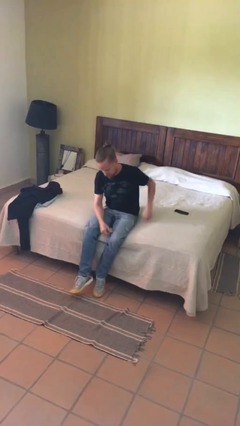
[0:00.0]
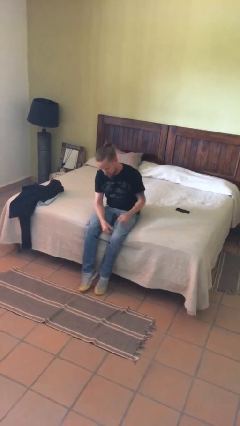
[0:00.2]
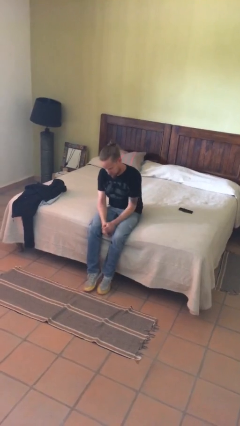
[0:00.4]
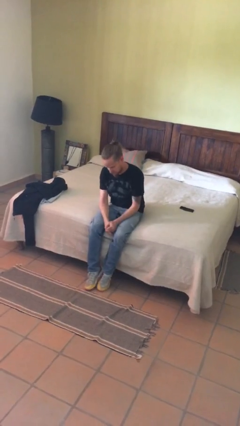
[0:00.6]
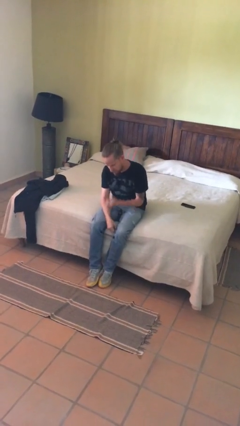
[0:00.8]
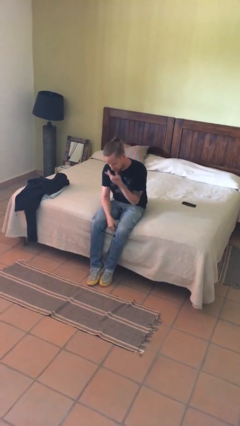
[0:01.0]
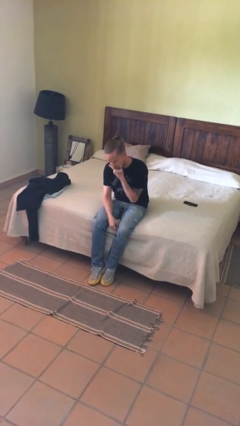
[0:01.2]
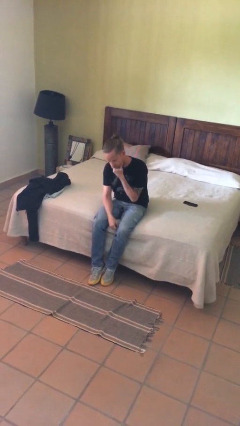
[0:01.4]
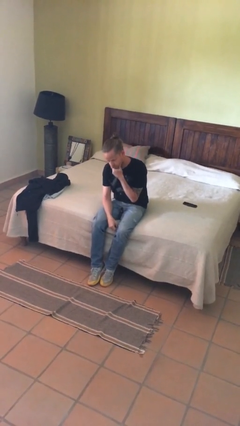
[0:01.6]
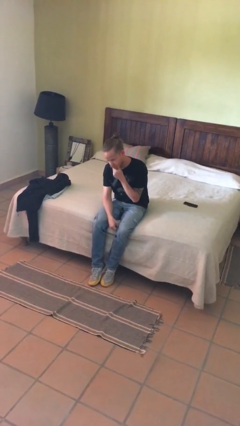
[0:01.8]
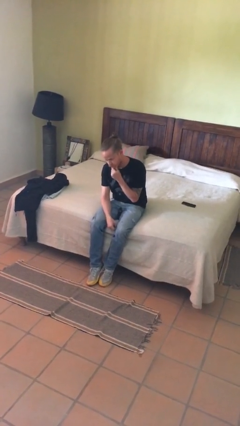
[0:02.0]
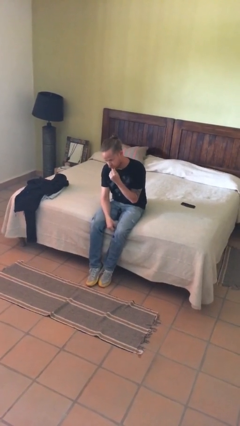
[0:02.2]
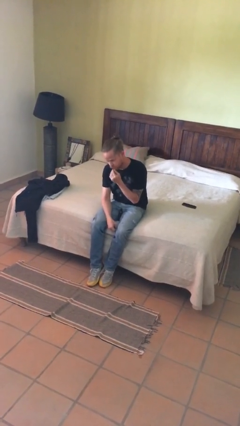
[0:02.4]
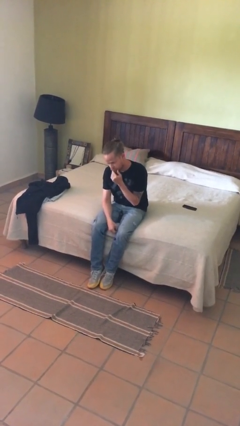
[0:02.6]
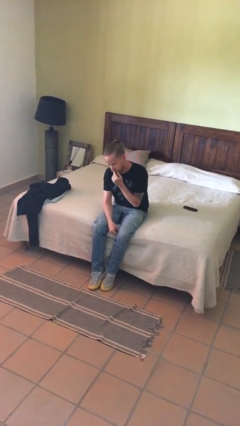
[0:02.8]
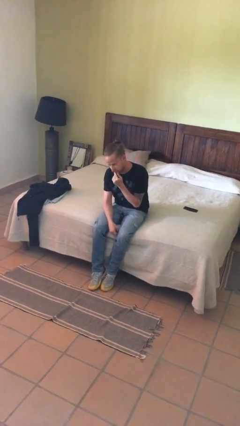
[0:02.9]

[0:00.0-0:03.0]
person strokes chin

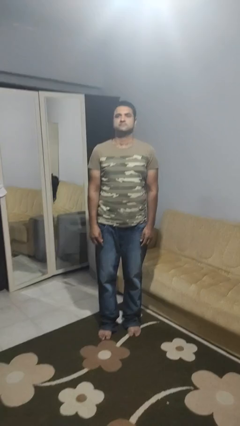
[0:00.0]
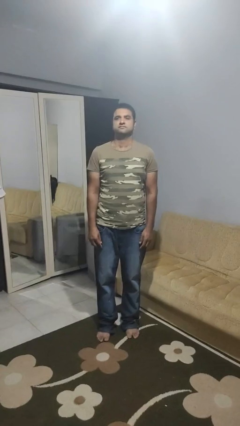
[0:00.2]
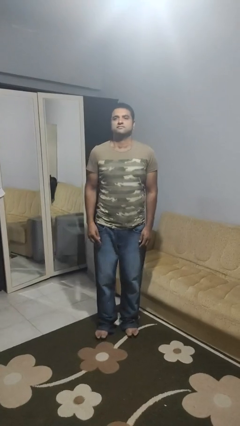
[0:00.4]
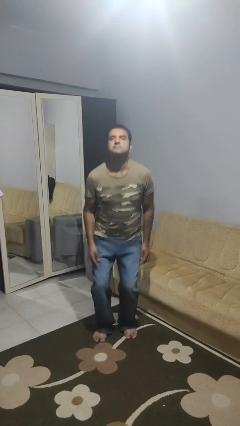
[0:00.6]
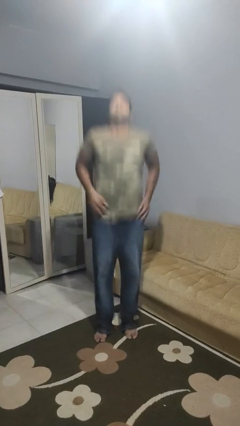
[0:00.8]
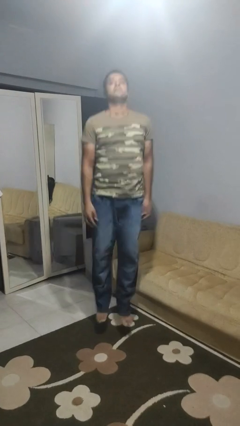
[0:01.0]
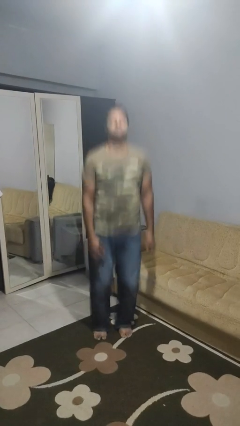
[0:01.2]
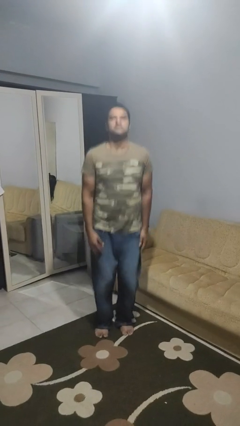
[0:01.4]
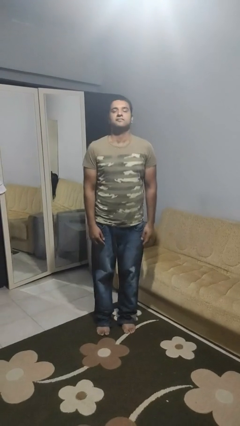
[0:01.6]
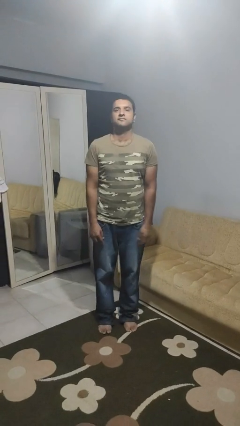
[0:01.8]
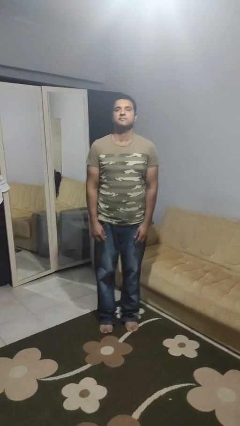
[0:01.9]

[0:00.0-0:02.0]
person jumps

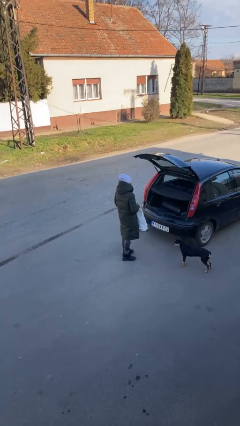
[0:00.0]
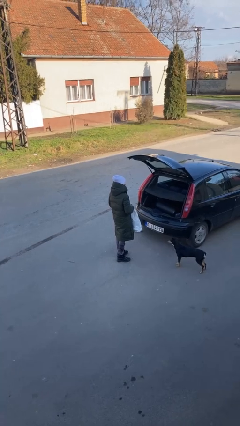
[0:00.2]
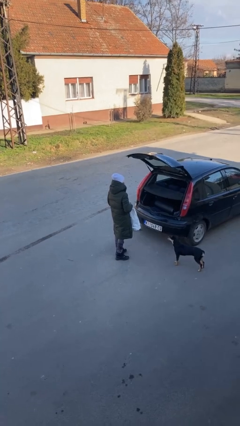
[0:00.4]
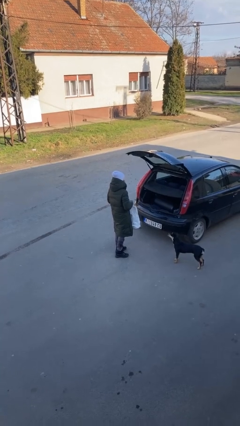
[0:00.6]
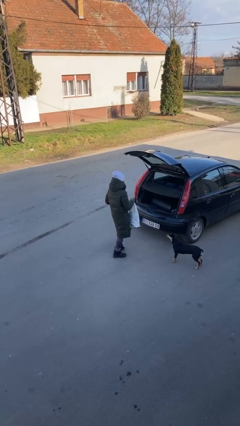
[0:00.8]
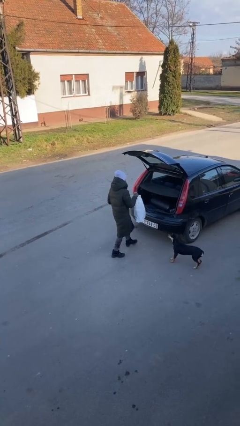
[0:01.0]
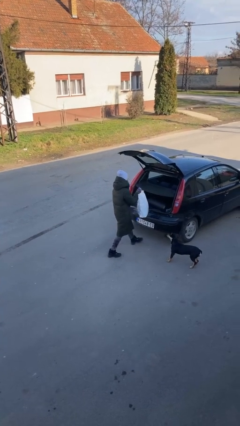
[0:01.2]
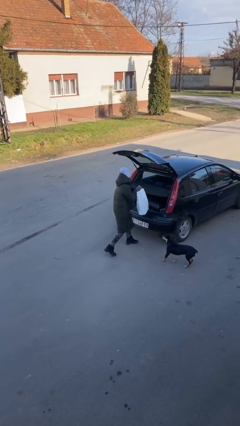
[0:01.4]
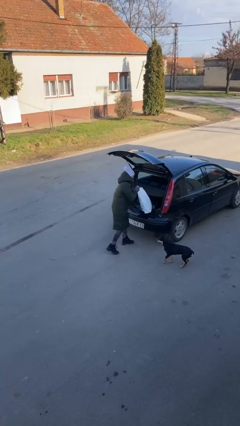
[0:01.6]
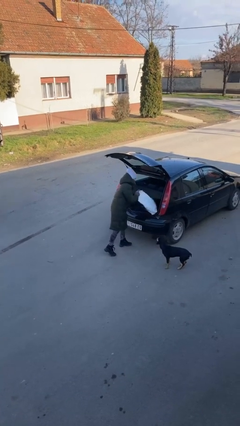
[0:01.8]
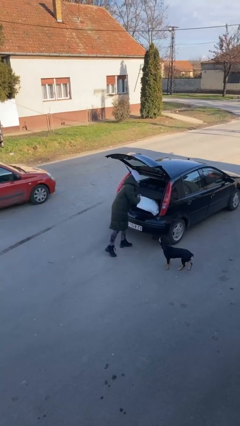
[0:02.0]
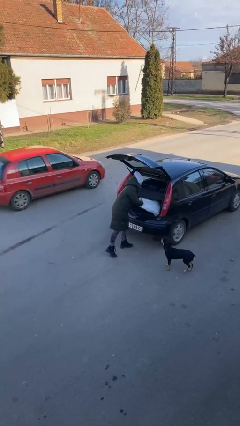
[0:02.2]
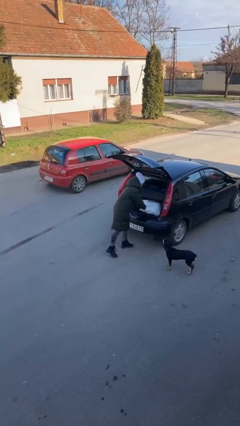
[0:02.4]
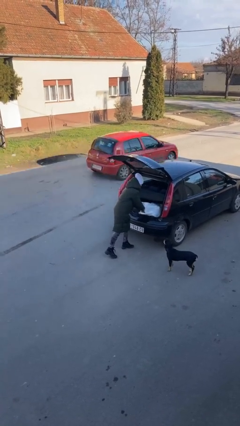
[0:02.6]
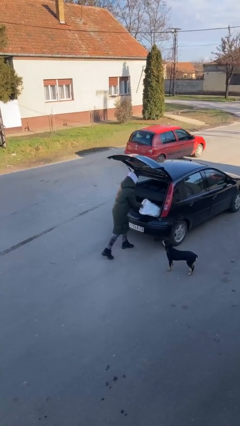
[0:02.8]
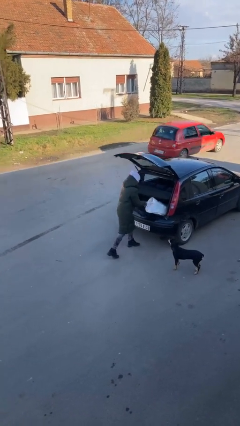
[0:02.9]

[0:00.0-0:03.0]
person loads car

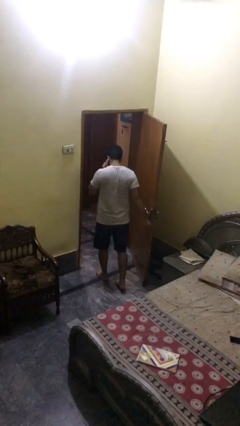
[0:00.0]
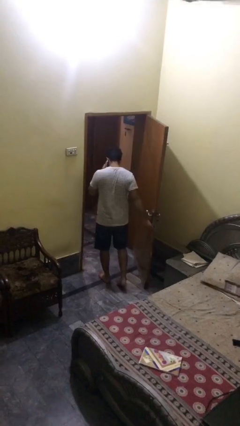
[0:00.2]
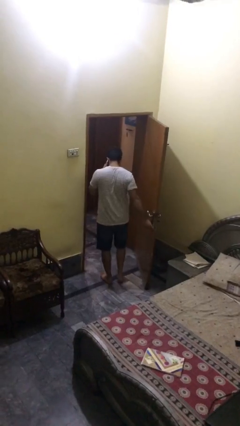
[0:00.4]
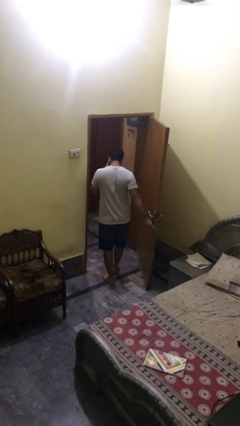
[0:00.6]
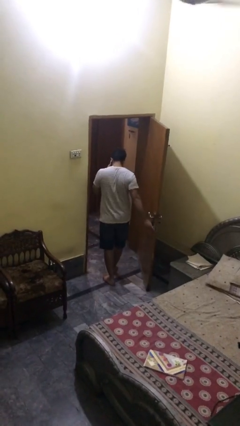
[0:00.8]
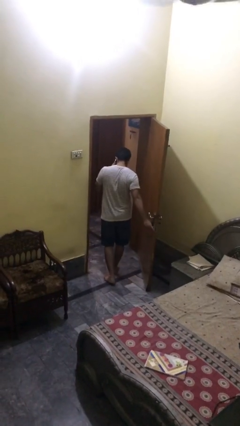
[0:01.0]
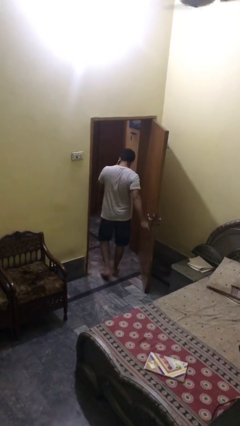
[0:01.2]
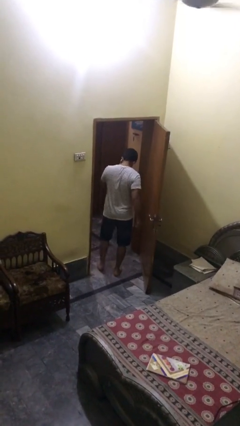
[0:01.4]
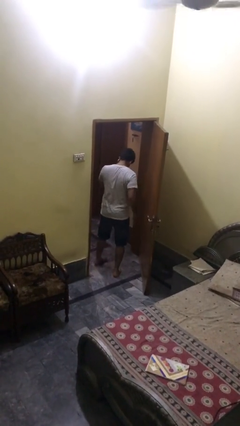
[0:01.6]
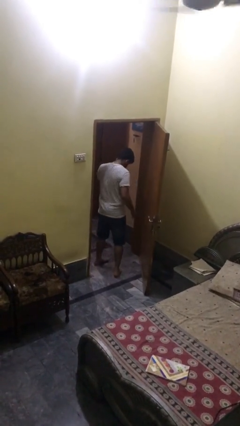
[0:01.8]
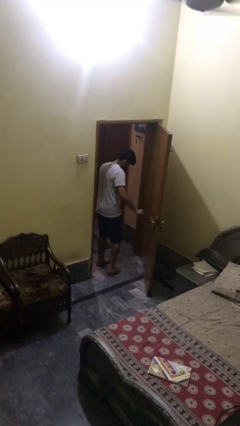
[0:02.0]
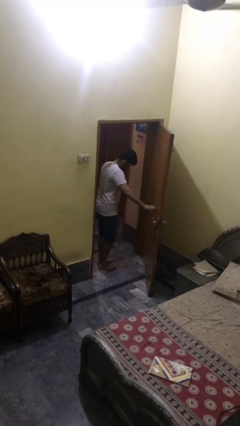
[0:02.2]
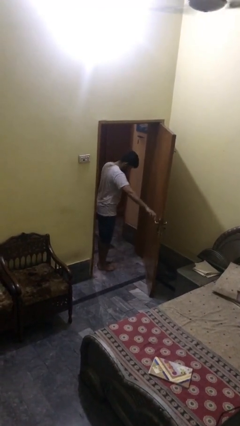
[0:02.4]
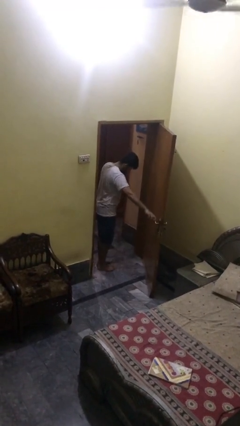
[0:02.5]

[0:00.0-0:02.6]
person exits scene through structure

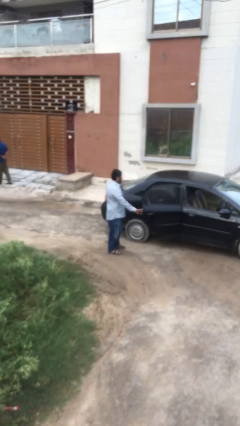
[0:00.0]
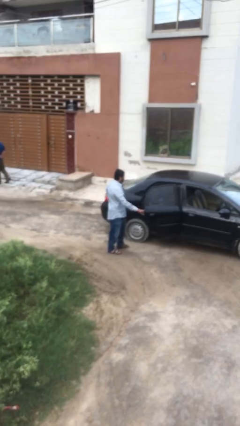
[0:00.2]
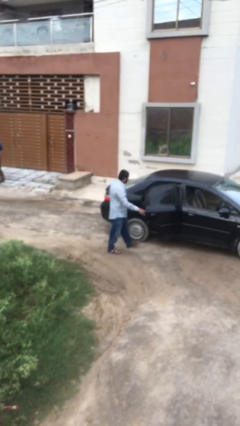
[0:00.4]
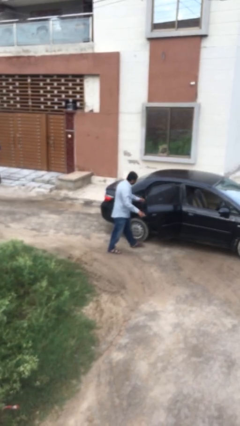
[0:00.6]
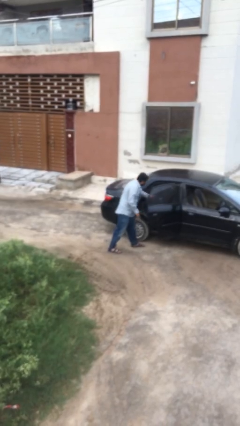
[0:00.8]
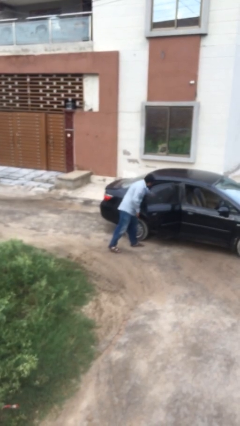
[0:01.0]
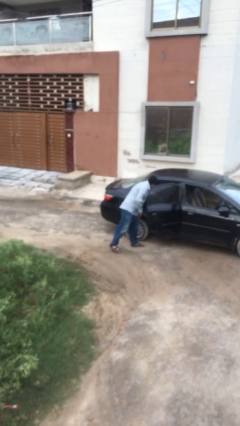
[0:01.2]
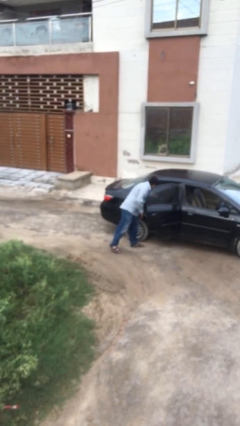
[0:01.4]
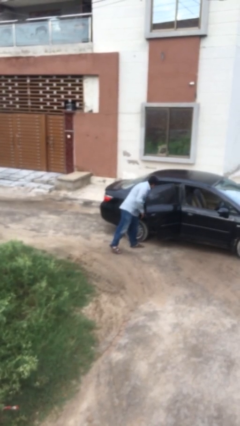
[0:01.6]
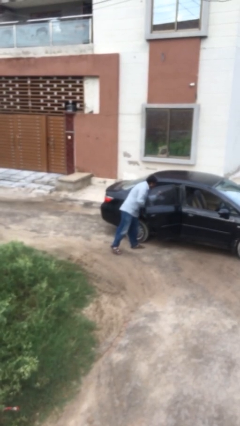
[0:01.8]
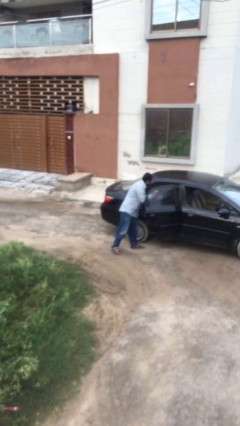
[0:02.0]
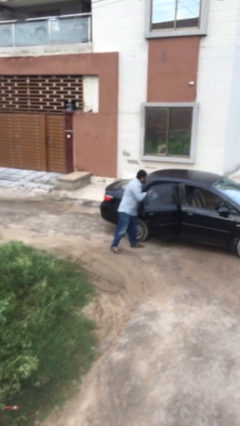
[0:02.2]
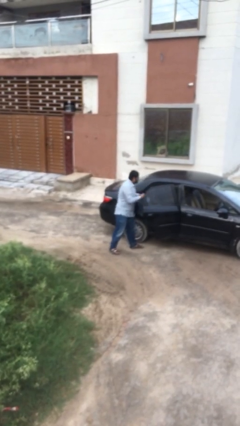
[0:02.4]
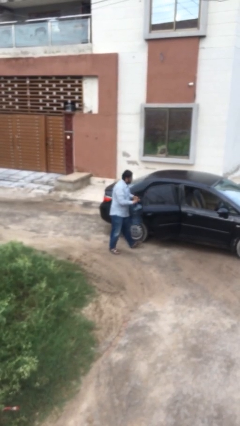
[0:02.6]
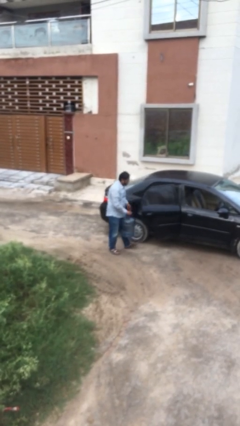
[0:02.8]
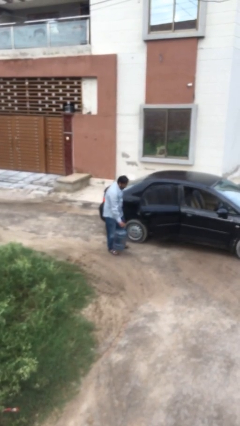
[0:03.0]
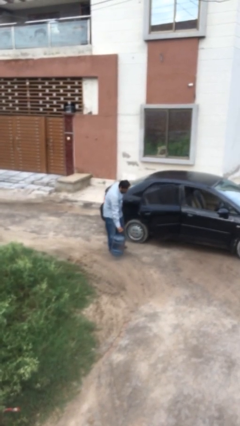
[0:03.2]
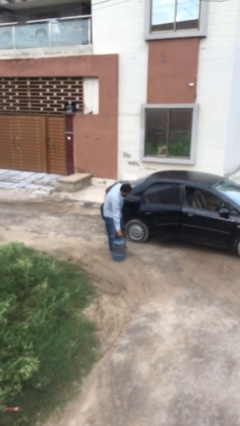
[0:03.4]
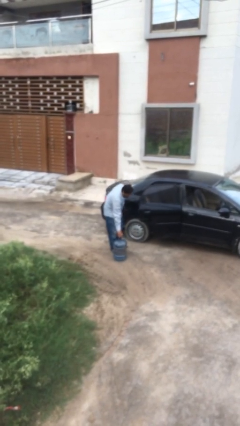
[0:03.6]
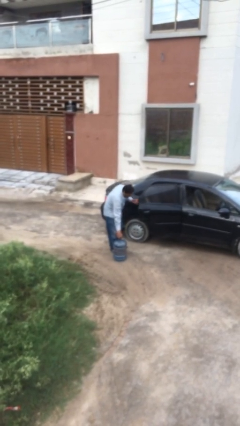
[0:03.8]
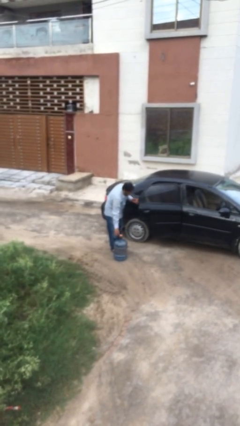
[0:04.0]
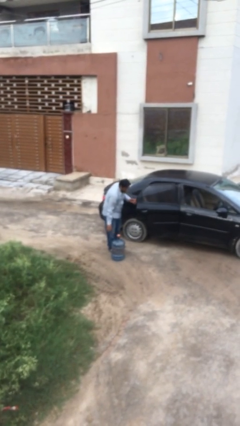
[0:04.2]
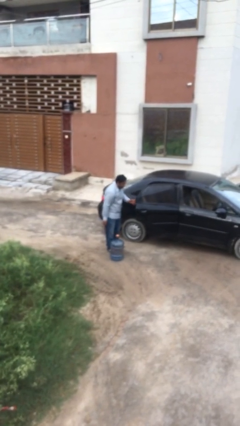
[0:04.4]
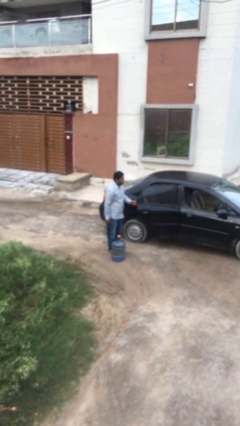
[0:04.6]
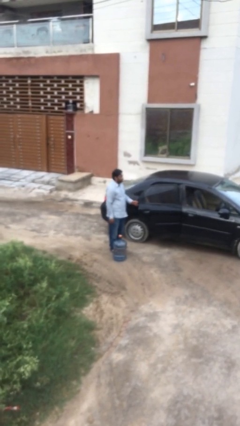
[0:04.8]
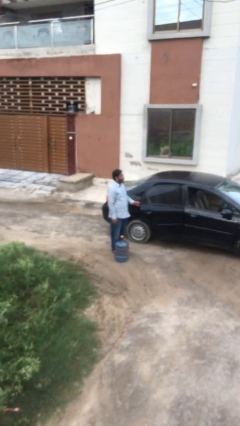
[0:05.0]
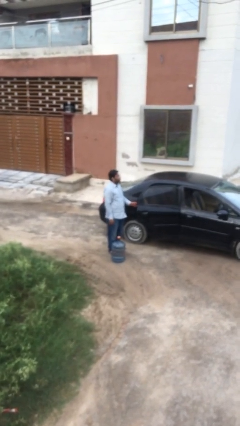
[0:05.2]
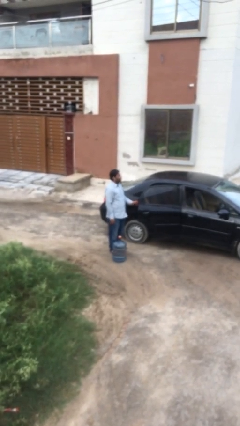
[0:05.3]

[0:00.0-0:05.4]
person unloads car

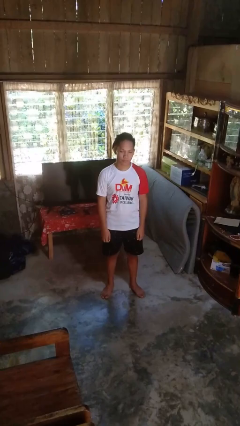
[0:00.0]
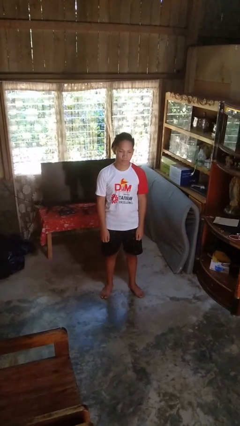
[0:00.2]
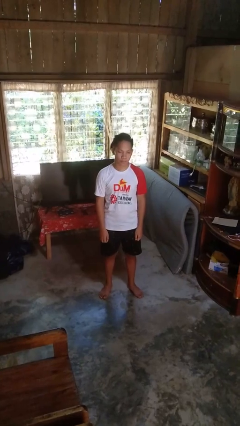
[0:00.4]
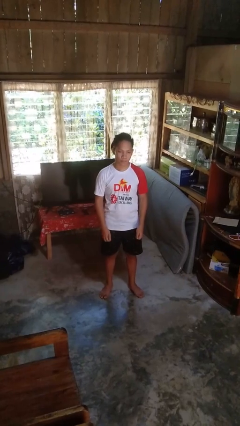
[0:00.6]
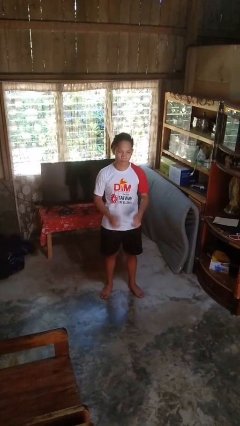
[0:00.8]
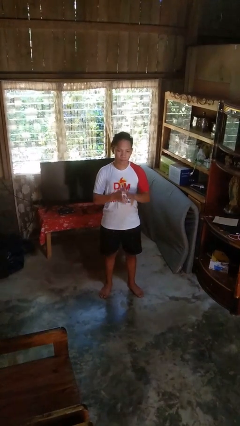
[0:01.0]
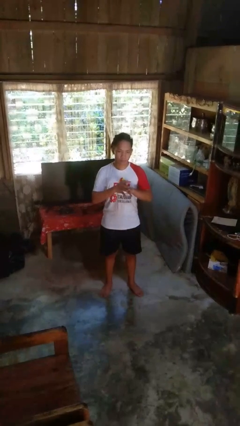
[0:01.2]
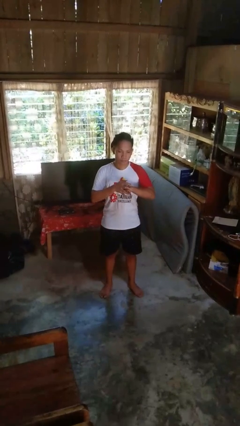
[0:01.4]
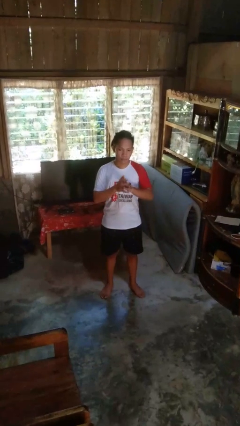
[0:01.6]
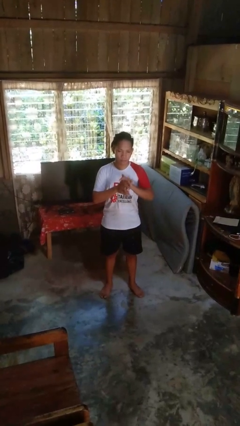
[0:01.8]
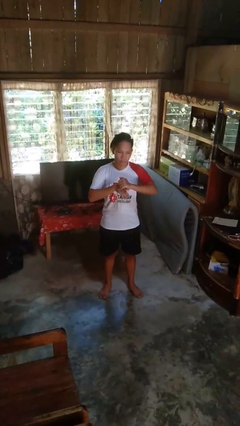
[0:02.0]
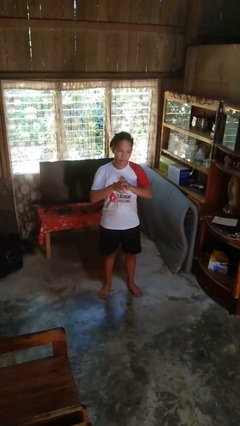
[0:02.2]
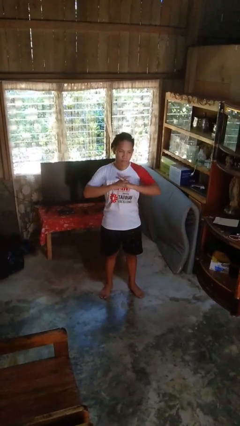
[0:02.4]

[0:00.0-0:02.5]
person cracks knuckles
